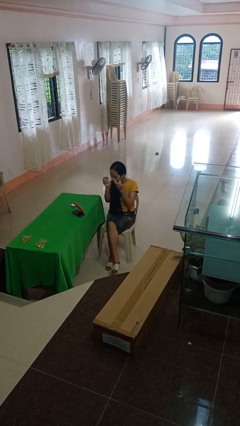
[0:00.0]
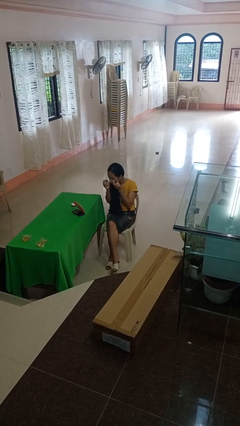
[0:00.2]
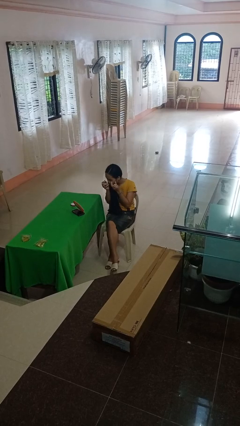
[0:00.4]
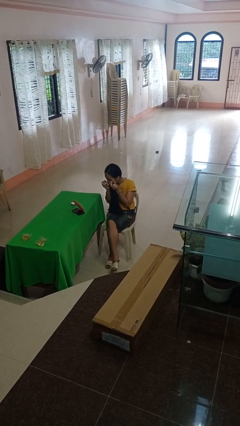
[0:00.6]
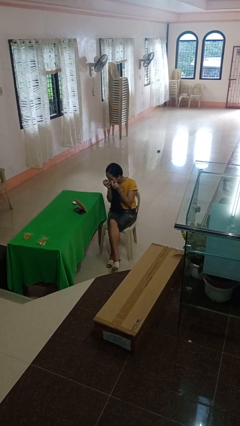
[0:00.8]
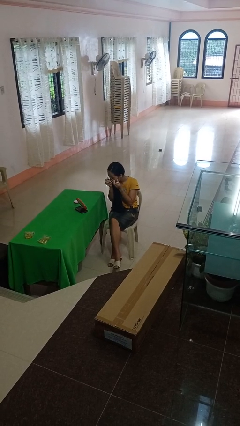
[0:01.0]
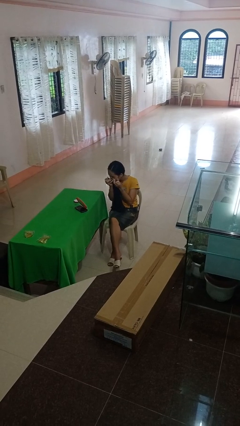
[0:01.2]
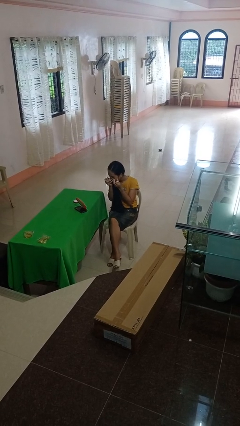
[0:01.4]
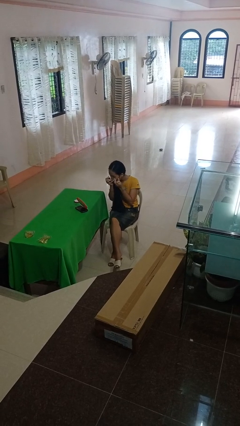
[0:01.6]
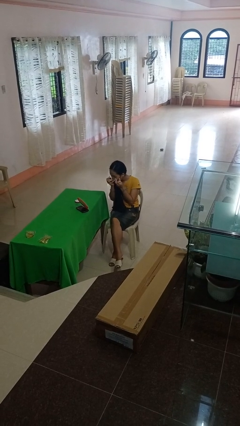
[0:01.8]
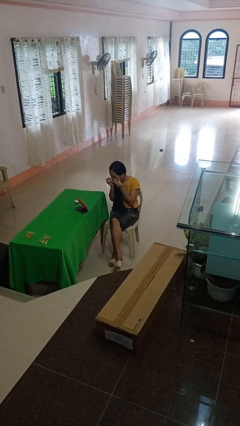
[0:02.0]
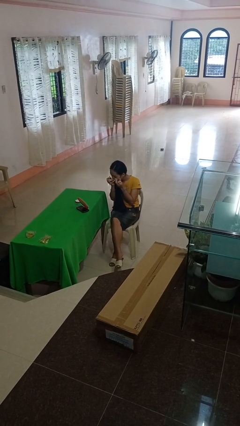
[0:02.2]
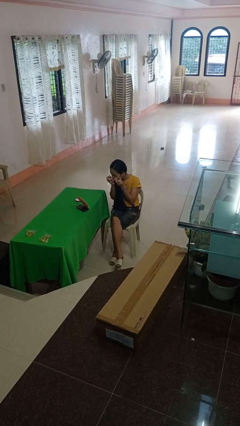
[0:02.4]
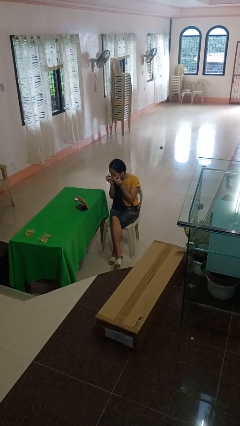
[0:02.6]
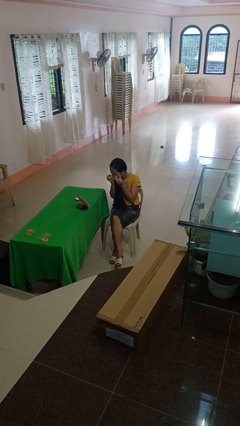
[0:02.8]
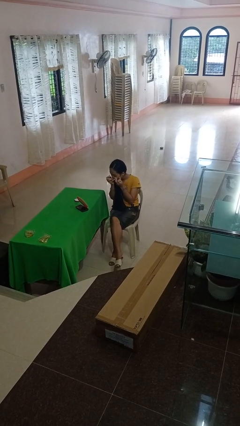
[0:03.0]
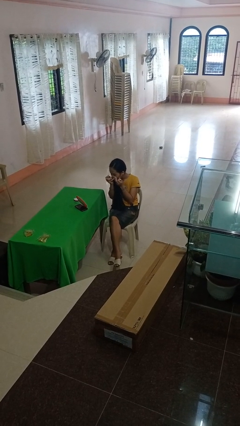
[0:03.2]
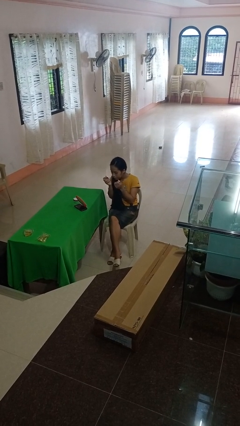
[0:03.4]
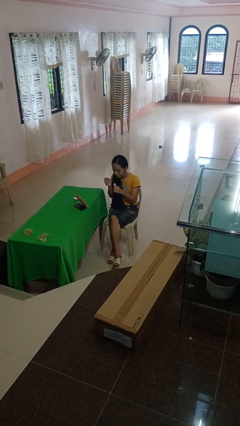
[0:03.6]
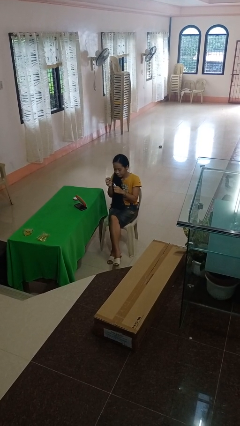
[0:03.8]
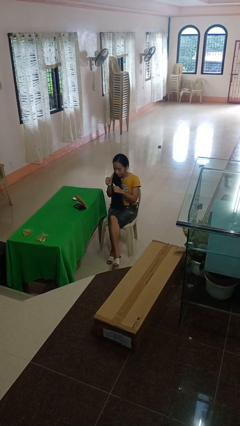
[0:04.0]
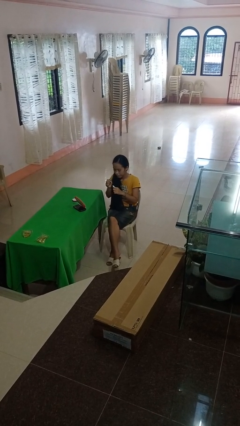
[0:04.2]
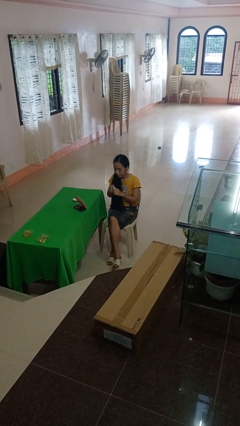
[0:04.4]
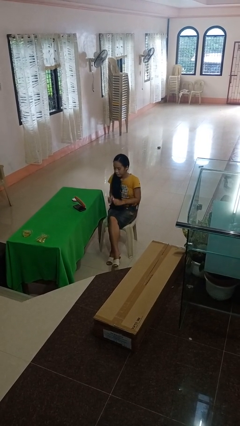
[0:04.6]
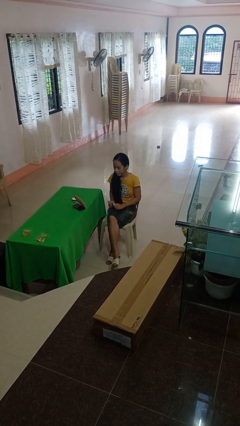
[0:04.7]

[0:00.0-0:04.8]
person applies eye makeup

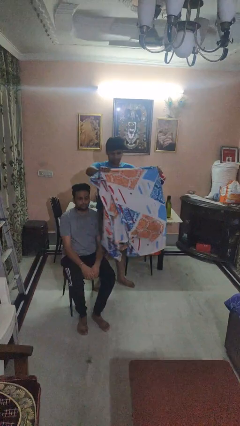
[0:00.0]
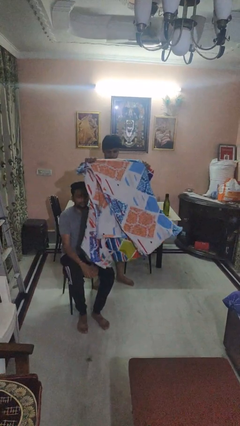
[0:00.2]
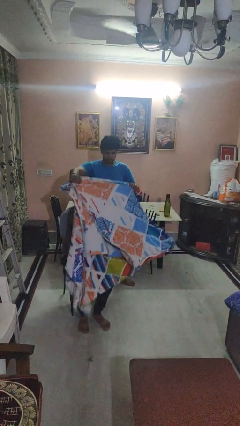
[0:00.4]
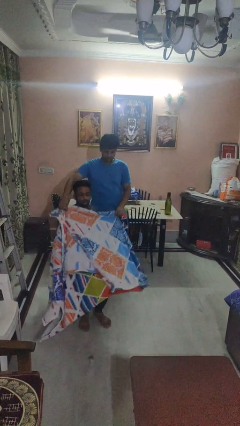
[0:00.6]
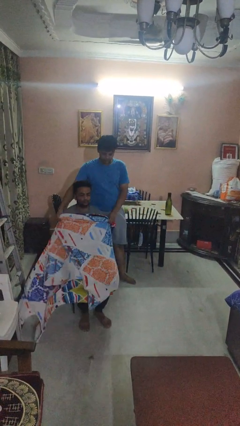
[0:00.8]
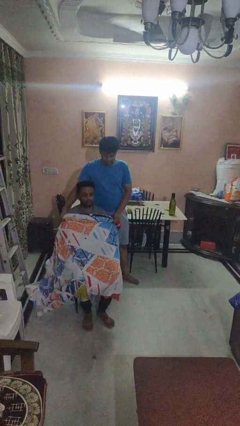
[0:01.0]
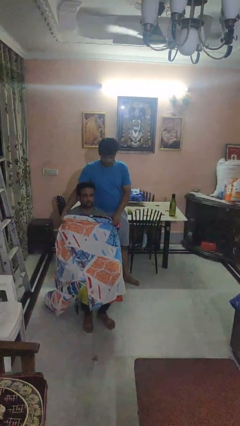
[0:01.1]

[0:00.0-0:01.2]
person covers friend with blanket

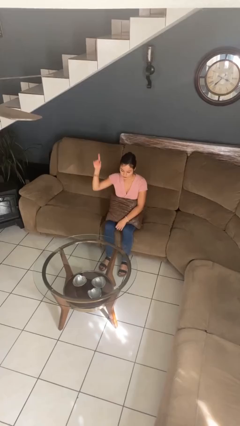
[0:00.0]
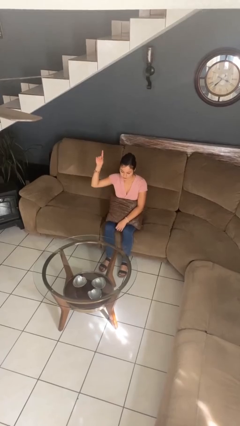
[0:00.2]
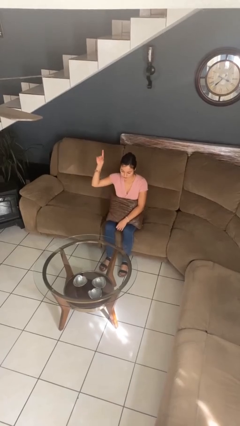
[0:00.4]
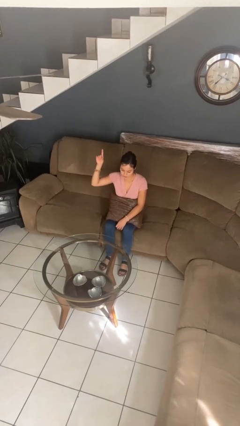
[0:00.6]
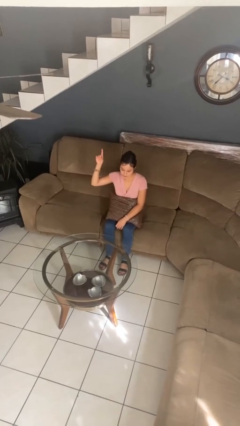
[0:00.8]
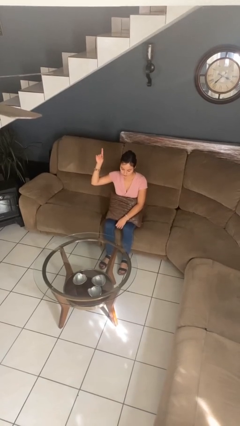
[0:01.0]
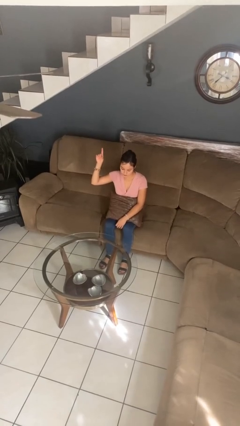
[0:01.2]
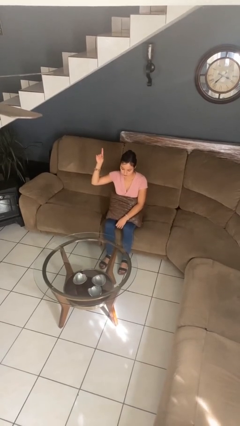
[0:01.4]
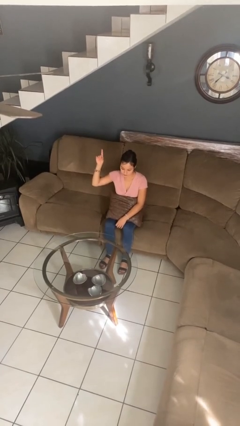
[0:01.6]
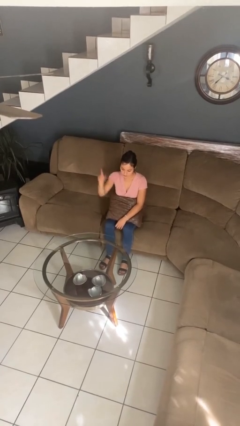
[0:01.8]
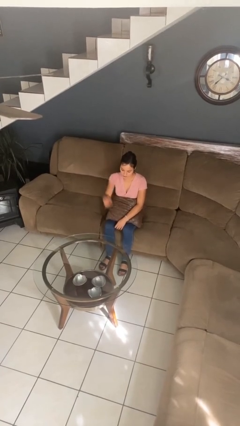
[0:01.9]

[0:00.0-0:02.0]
person gestures number one

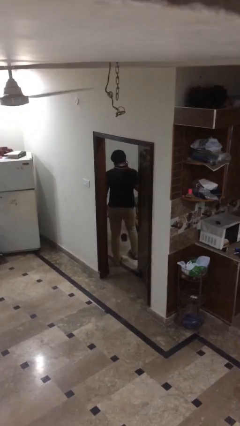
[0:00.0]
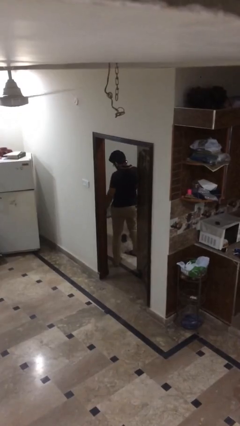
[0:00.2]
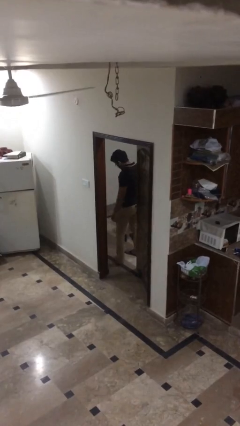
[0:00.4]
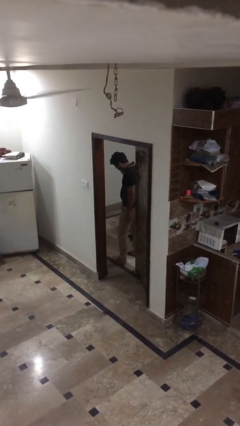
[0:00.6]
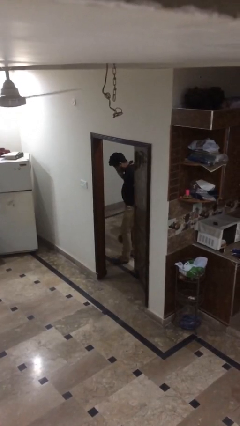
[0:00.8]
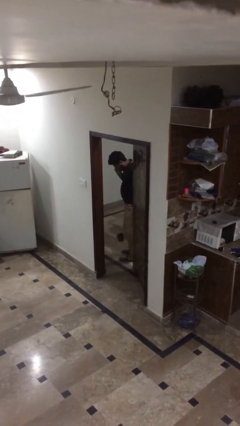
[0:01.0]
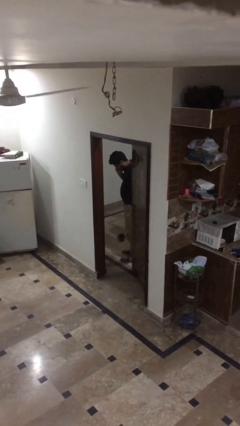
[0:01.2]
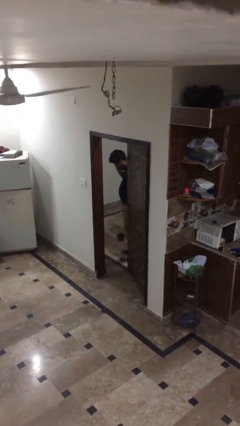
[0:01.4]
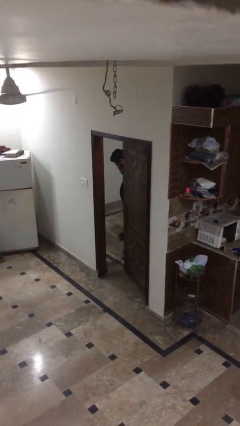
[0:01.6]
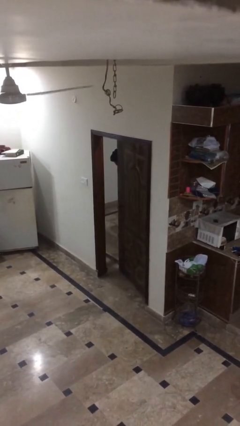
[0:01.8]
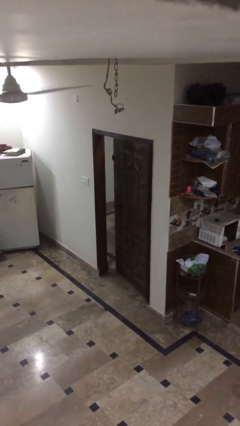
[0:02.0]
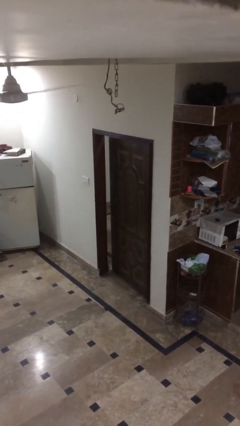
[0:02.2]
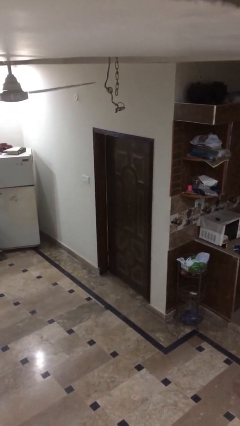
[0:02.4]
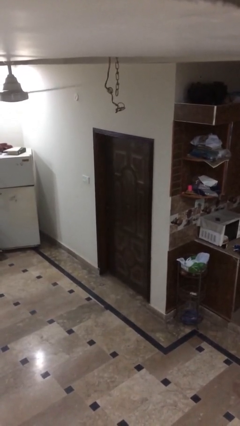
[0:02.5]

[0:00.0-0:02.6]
person closes facility door

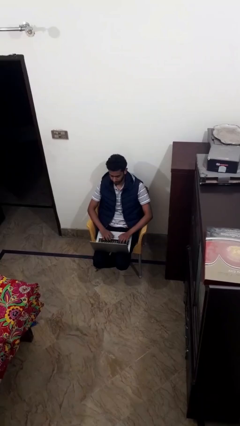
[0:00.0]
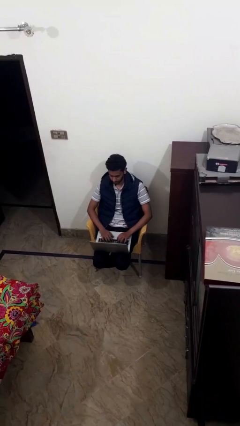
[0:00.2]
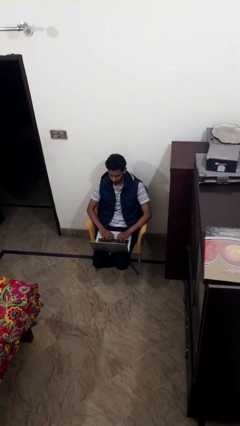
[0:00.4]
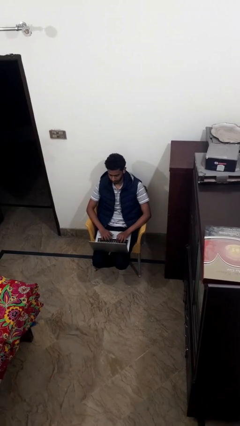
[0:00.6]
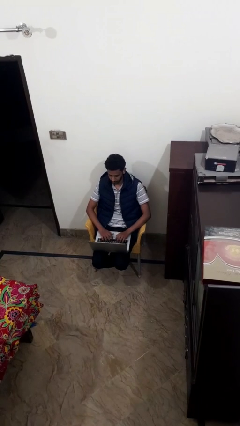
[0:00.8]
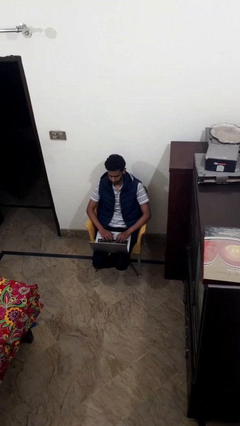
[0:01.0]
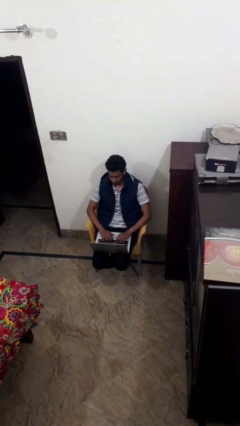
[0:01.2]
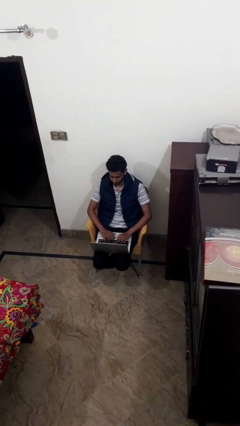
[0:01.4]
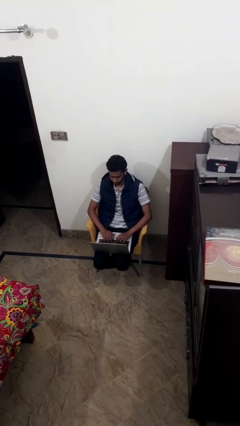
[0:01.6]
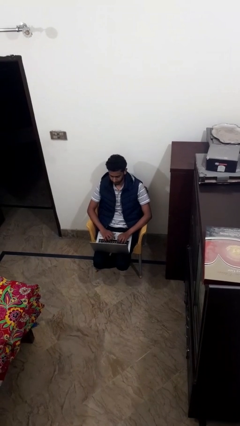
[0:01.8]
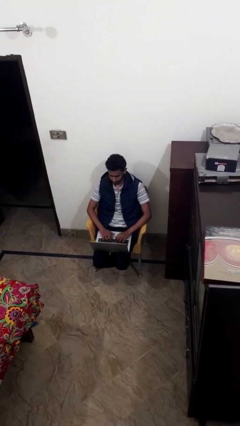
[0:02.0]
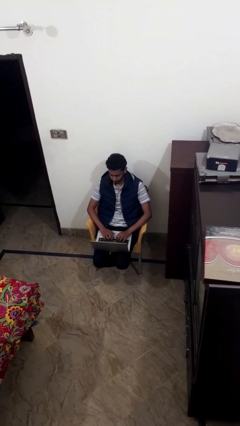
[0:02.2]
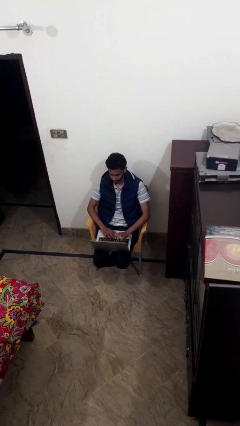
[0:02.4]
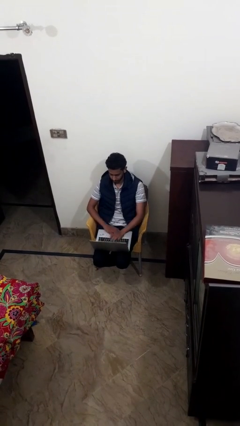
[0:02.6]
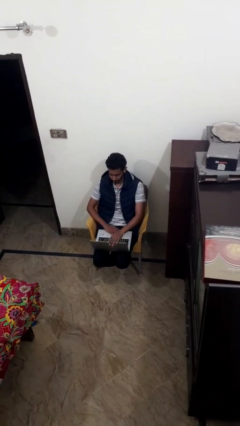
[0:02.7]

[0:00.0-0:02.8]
person interacts with laptop

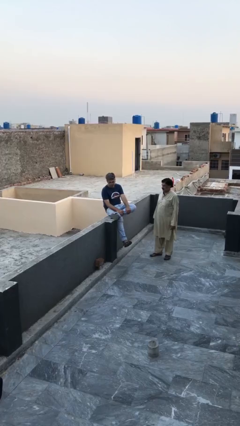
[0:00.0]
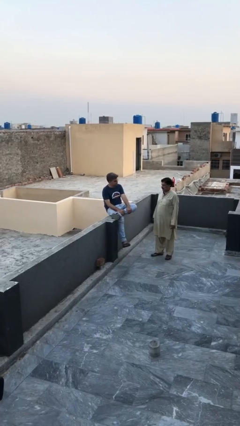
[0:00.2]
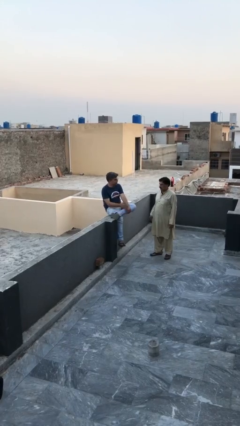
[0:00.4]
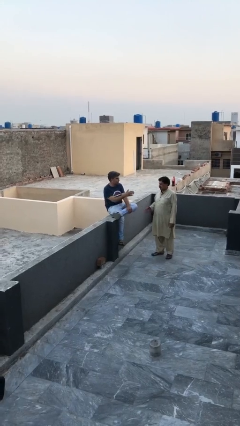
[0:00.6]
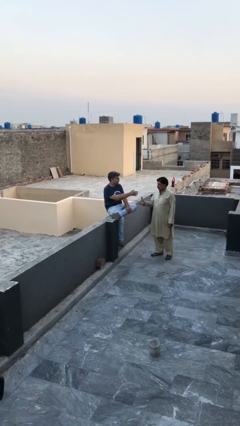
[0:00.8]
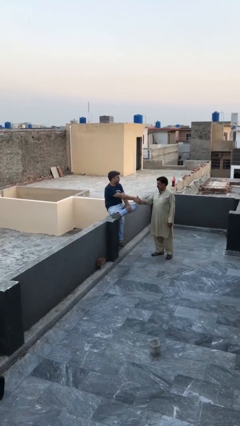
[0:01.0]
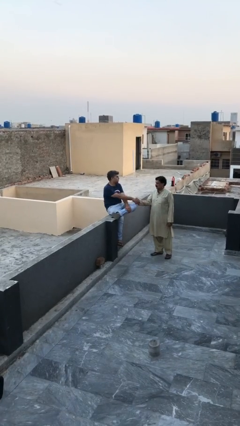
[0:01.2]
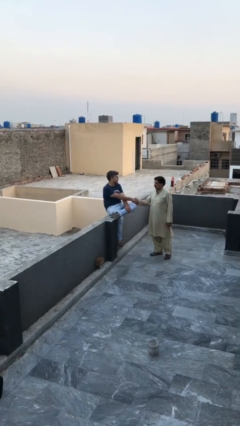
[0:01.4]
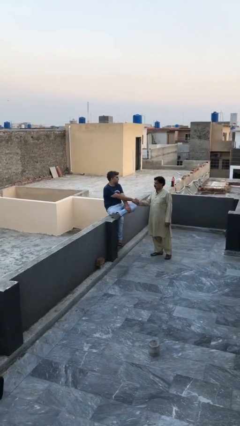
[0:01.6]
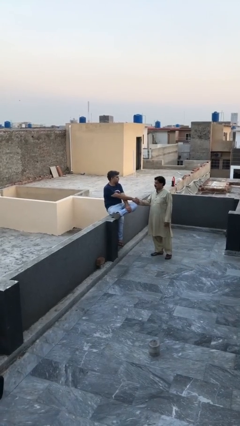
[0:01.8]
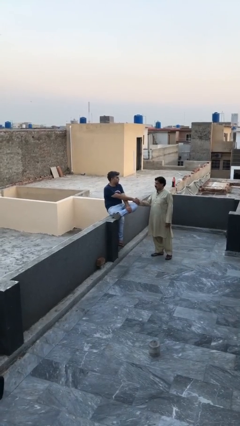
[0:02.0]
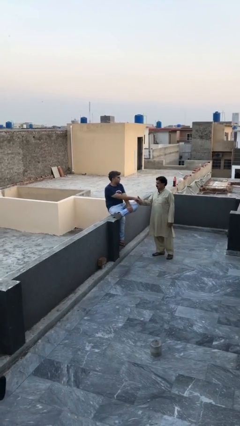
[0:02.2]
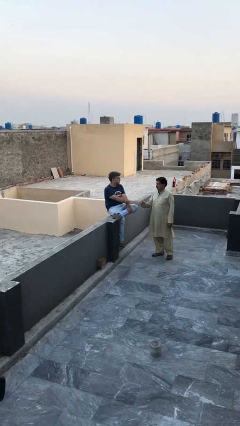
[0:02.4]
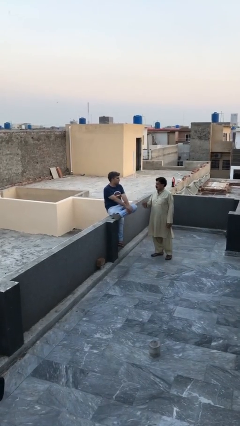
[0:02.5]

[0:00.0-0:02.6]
person shakes hand

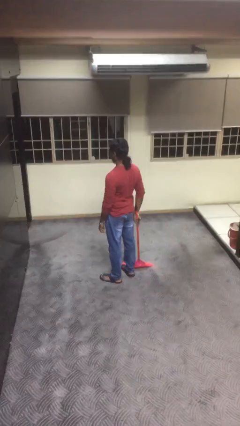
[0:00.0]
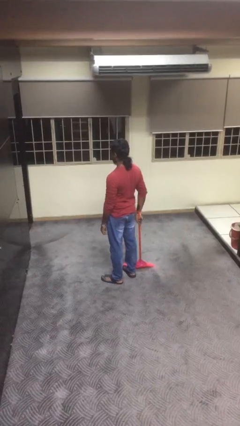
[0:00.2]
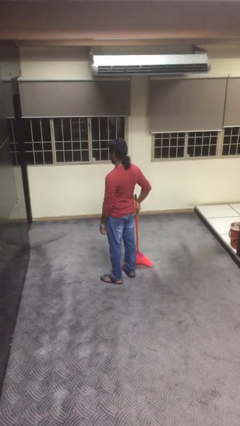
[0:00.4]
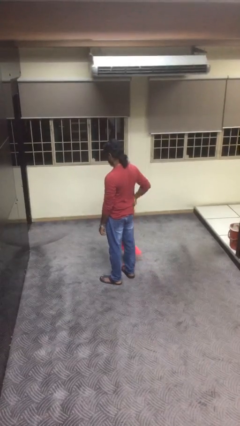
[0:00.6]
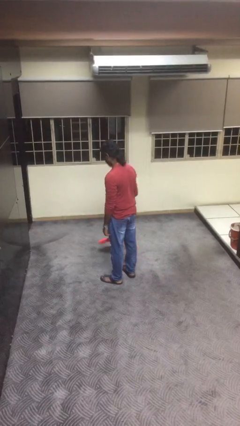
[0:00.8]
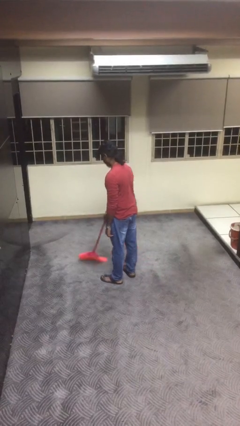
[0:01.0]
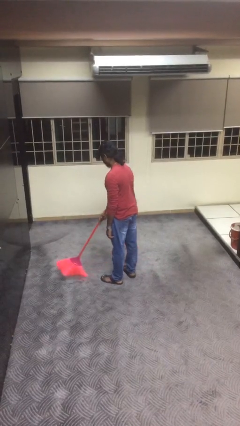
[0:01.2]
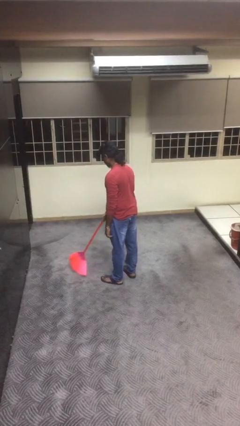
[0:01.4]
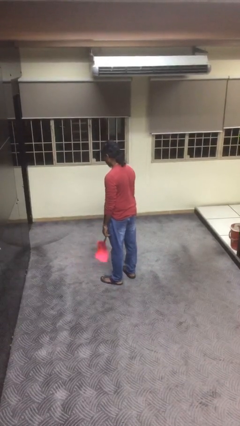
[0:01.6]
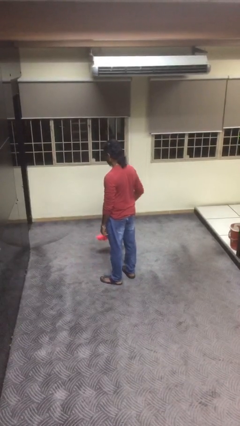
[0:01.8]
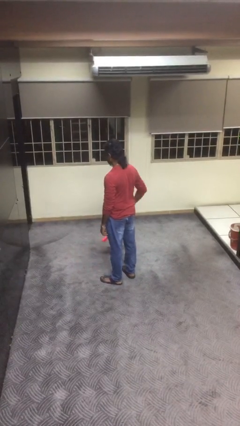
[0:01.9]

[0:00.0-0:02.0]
person sweeps floor
